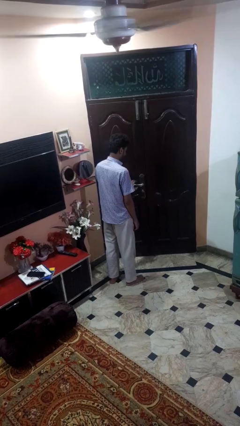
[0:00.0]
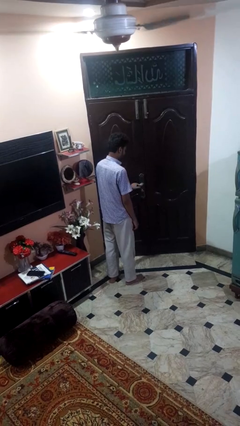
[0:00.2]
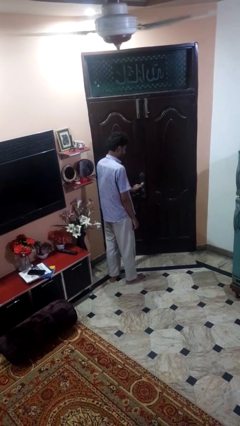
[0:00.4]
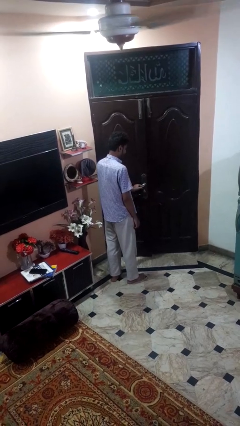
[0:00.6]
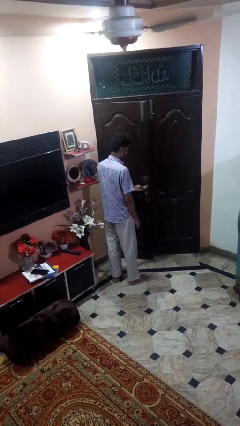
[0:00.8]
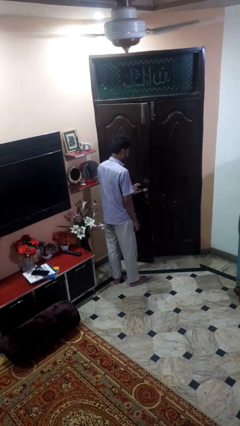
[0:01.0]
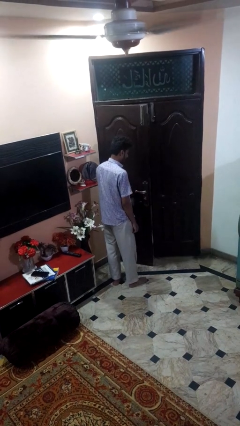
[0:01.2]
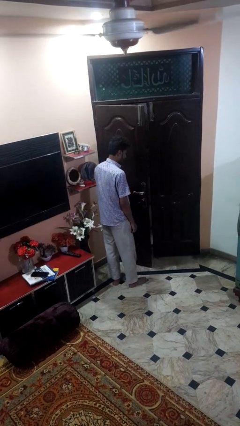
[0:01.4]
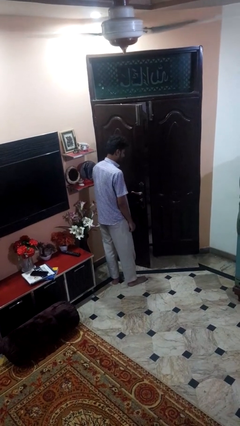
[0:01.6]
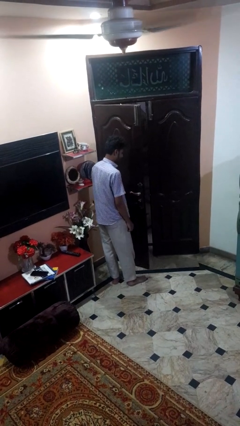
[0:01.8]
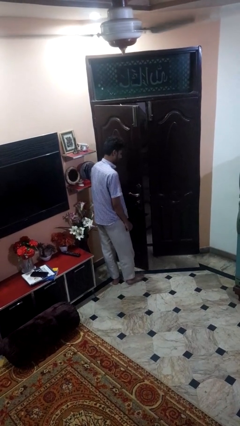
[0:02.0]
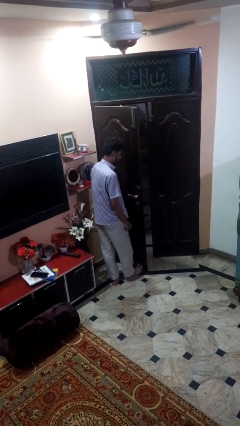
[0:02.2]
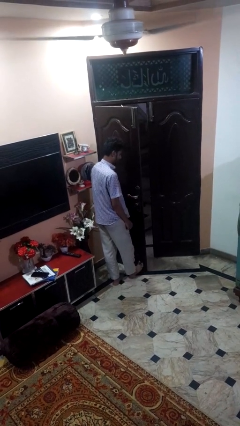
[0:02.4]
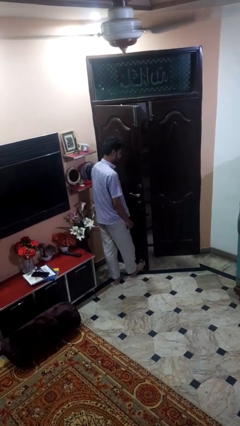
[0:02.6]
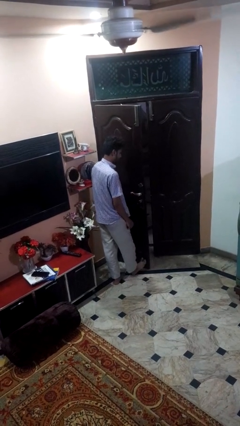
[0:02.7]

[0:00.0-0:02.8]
person opens facility door

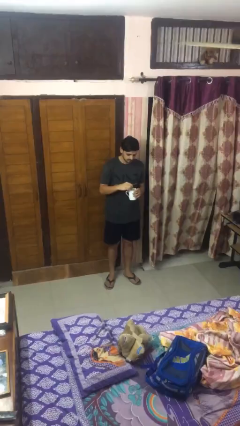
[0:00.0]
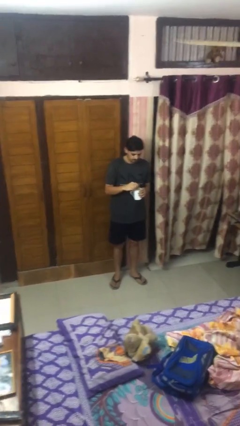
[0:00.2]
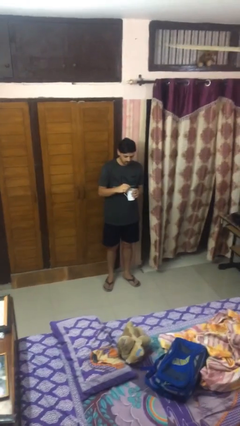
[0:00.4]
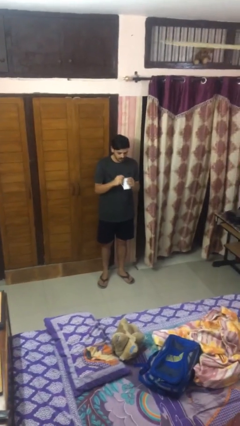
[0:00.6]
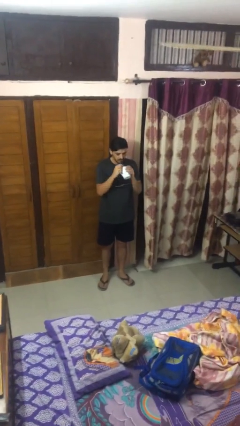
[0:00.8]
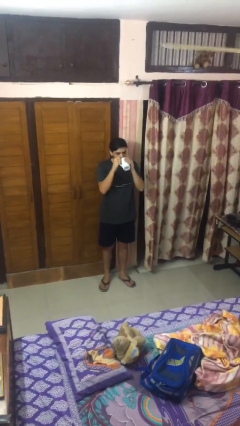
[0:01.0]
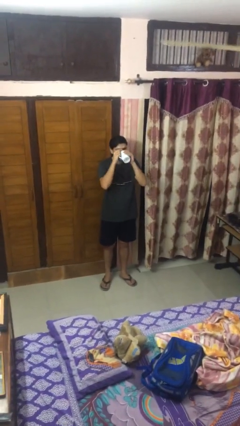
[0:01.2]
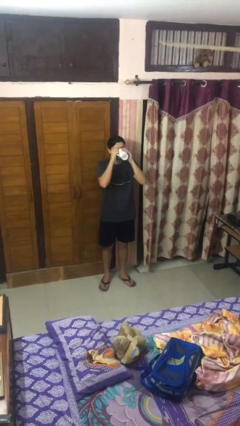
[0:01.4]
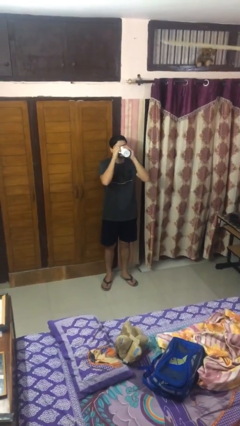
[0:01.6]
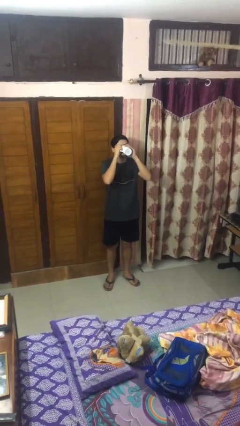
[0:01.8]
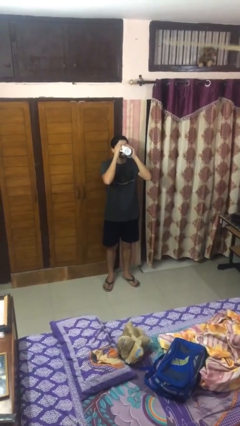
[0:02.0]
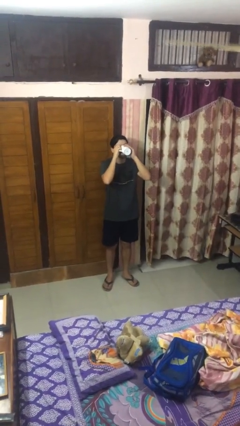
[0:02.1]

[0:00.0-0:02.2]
person drinks from mug

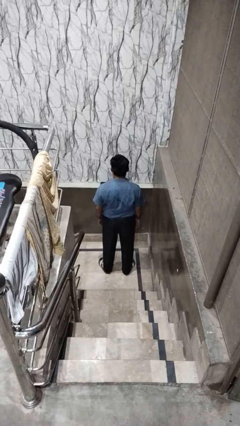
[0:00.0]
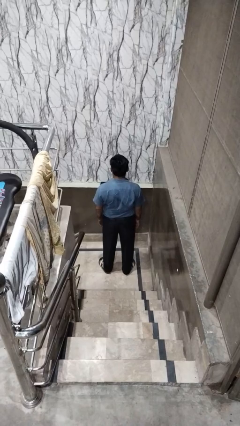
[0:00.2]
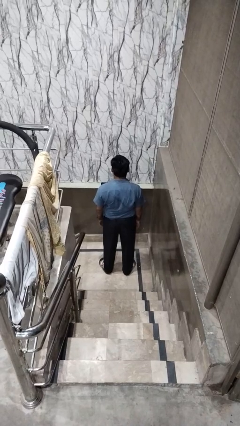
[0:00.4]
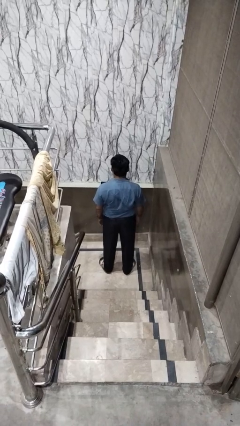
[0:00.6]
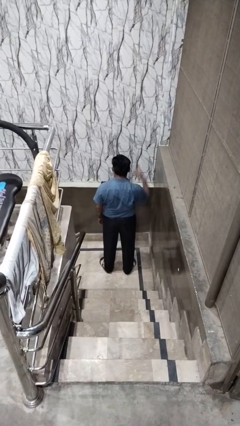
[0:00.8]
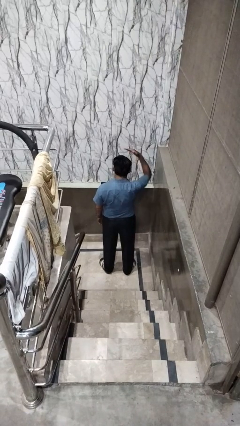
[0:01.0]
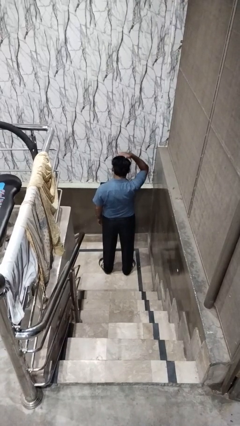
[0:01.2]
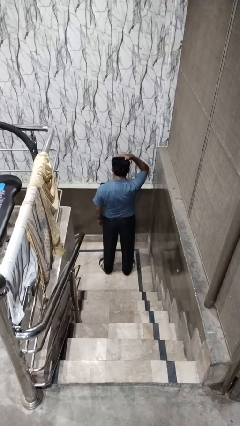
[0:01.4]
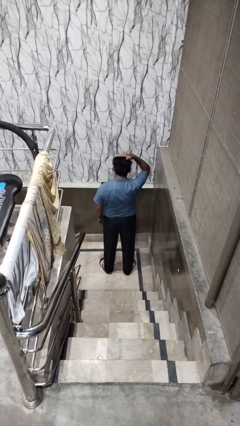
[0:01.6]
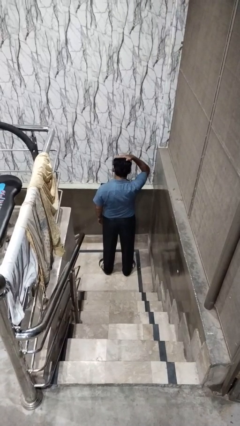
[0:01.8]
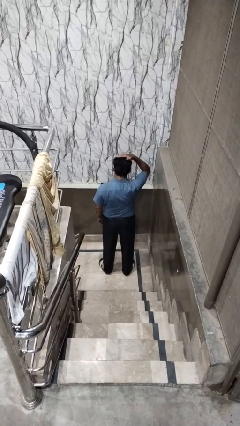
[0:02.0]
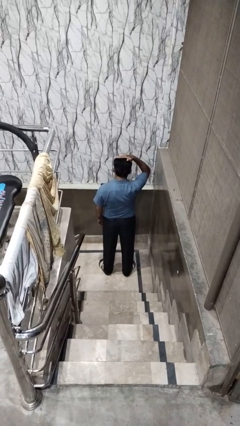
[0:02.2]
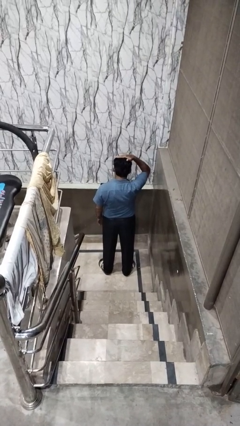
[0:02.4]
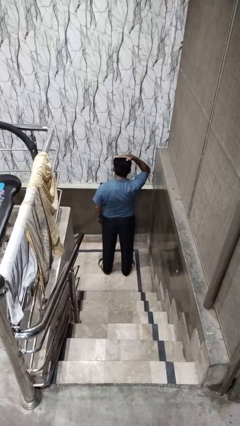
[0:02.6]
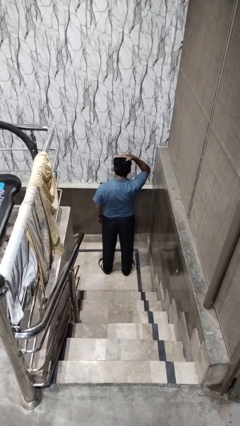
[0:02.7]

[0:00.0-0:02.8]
person pats head

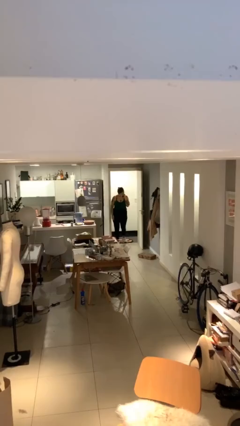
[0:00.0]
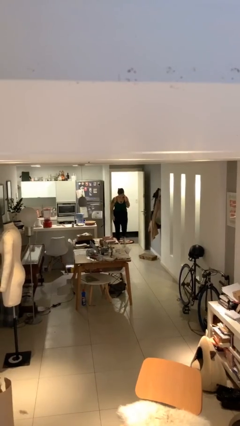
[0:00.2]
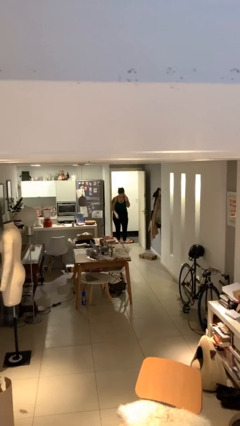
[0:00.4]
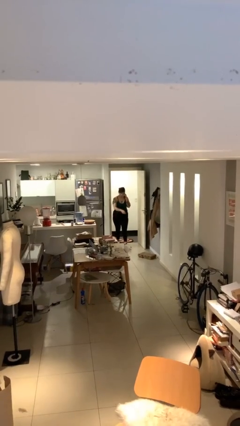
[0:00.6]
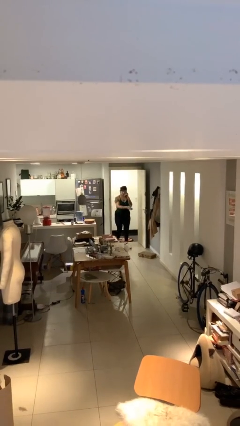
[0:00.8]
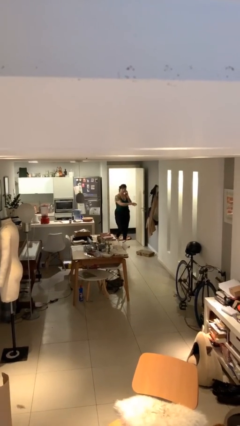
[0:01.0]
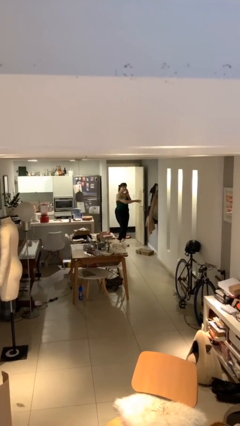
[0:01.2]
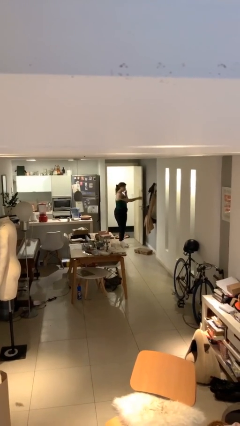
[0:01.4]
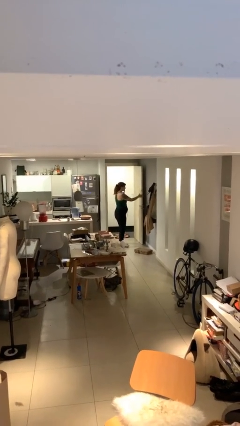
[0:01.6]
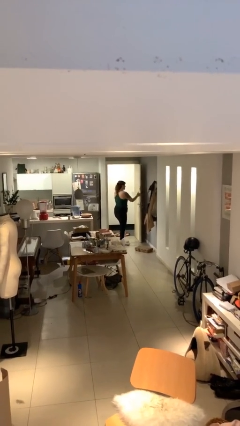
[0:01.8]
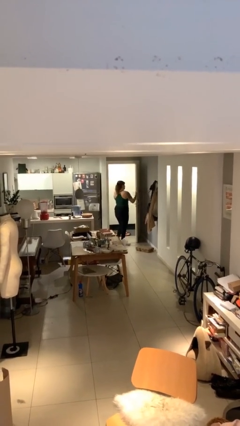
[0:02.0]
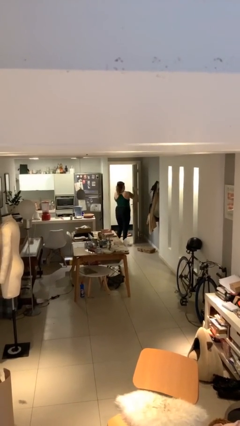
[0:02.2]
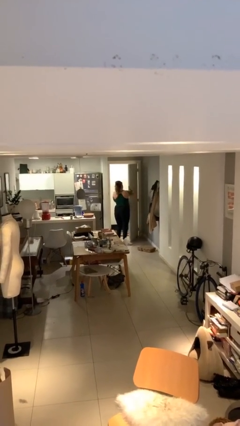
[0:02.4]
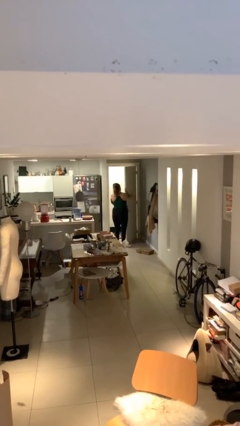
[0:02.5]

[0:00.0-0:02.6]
person enters scene through structure

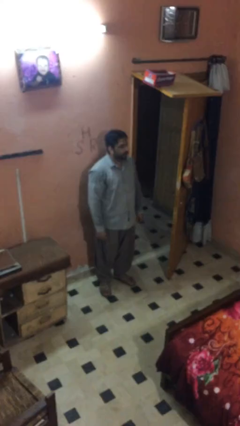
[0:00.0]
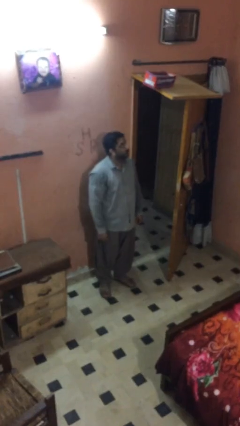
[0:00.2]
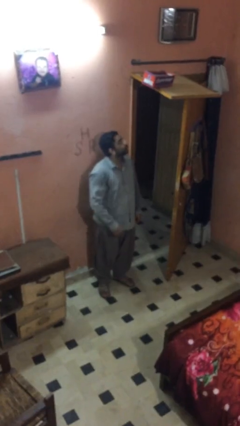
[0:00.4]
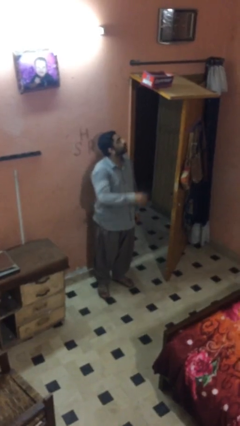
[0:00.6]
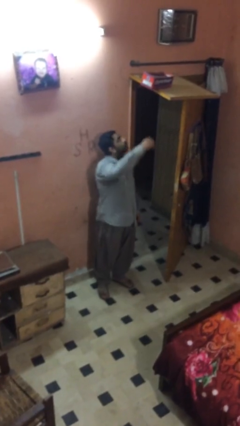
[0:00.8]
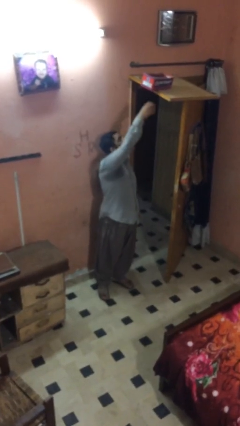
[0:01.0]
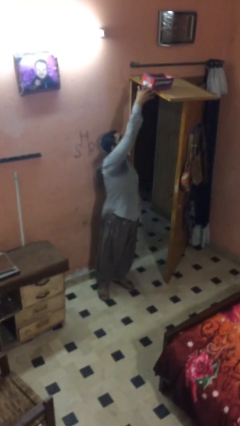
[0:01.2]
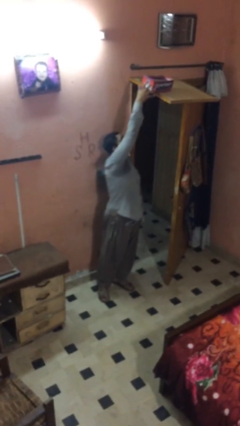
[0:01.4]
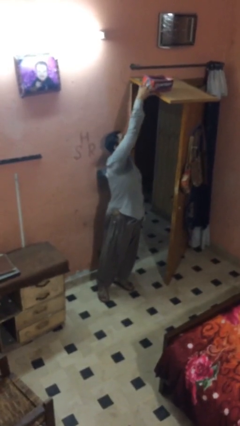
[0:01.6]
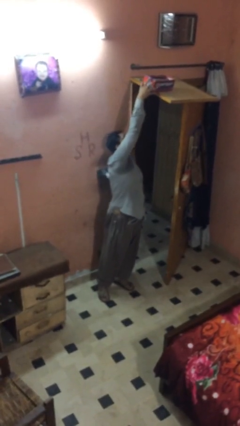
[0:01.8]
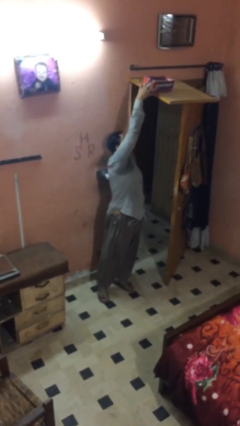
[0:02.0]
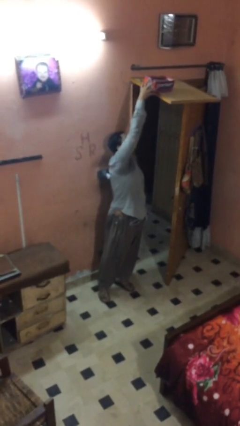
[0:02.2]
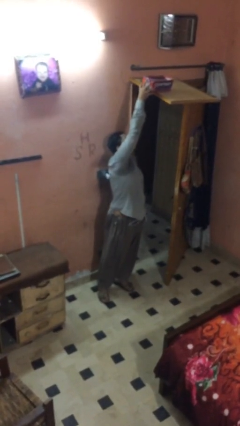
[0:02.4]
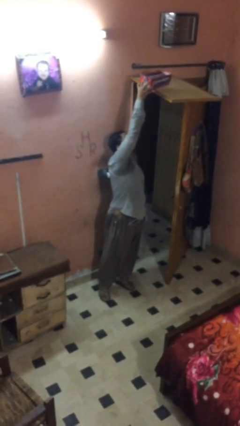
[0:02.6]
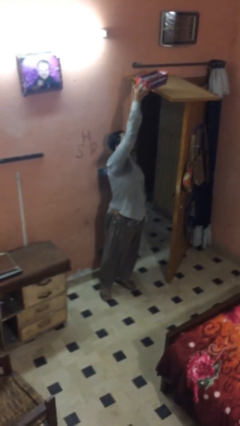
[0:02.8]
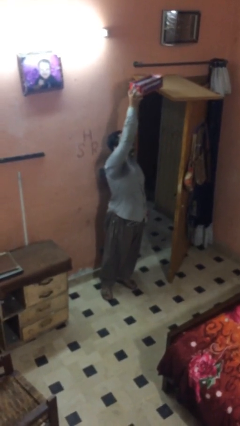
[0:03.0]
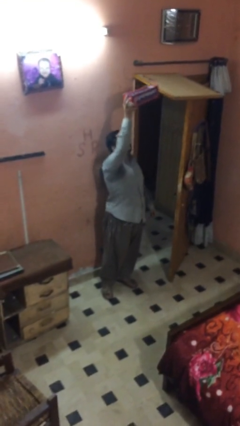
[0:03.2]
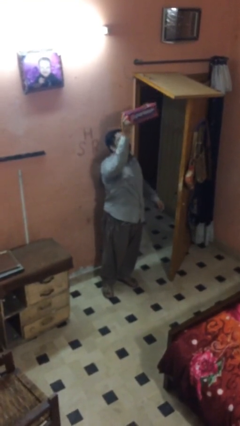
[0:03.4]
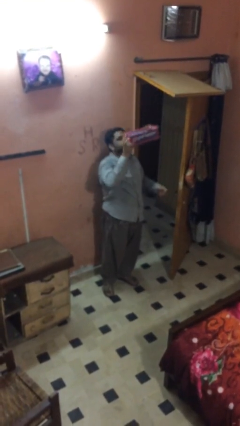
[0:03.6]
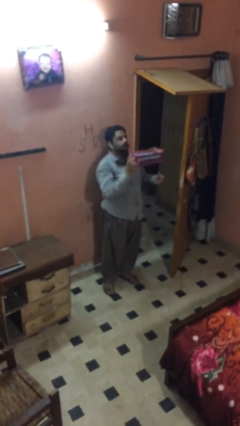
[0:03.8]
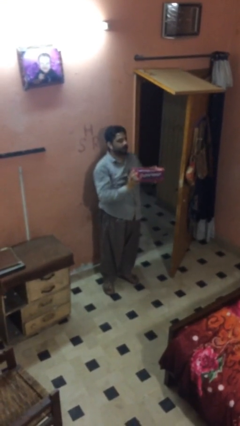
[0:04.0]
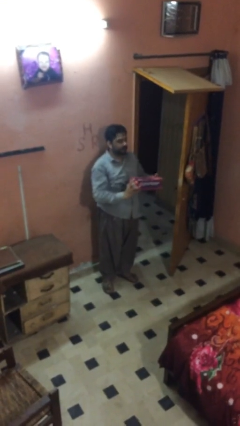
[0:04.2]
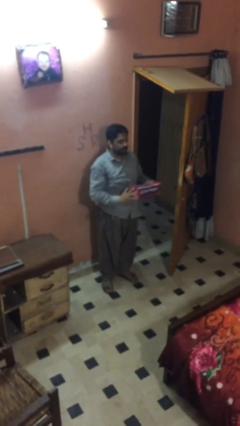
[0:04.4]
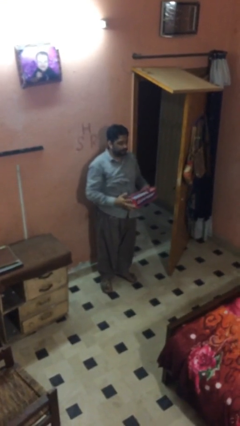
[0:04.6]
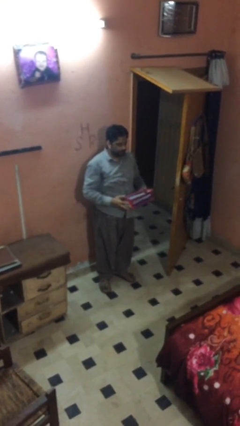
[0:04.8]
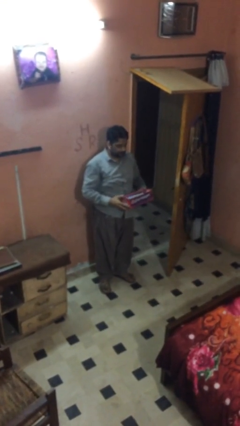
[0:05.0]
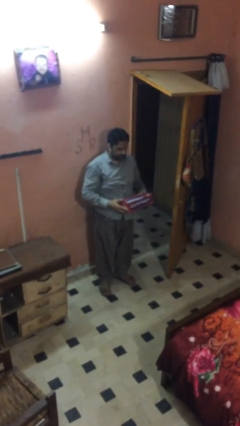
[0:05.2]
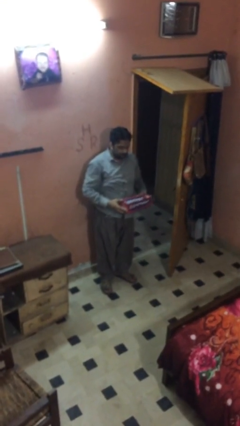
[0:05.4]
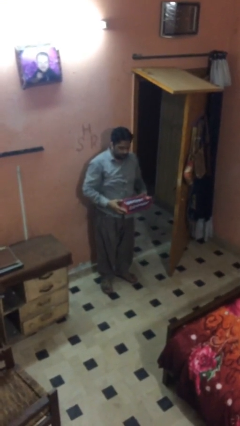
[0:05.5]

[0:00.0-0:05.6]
person picks up object from shelf

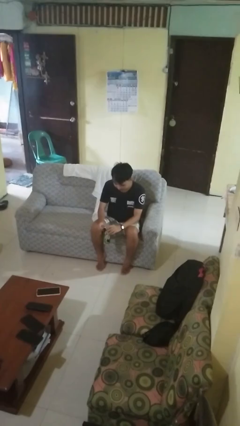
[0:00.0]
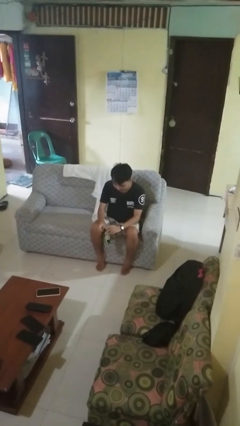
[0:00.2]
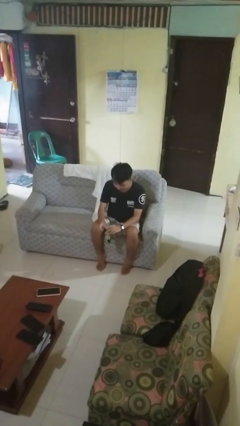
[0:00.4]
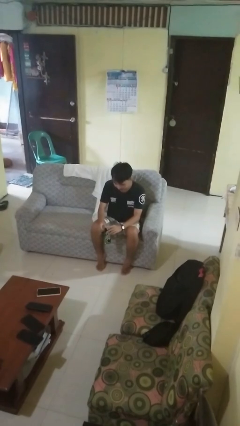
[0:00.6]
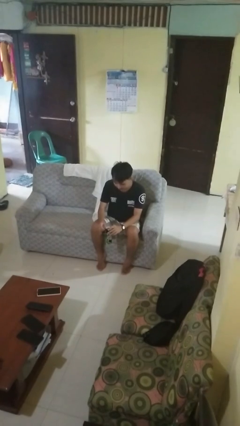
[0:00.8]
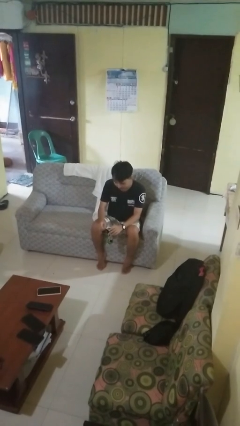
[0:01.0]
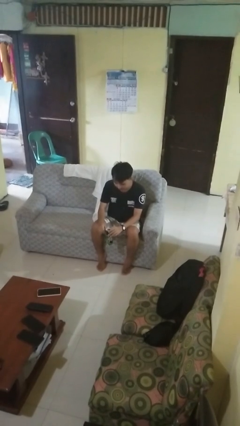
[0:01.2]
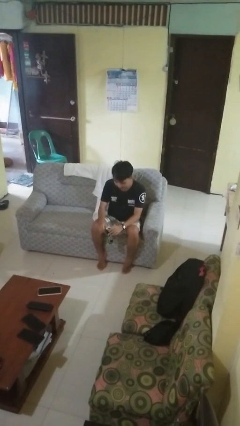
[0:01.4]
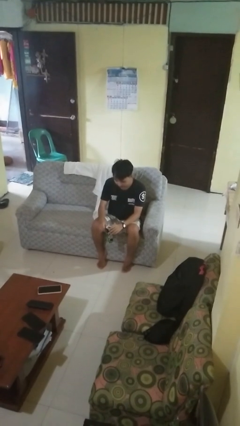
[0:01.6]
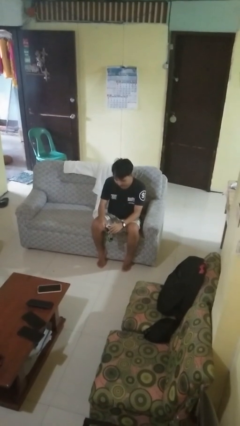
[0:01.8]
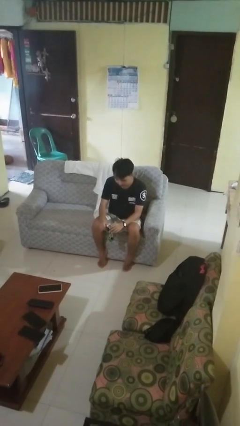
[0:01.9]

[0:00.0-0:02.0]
person opens beverage can
